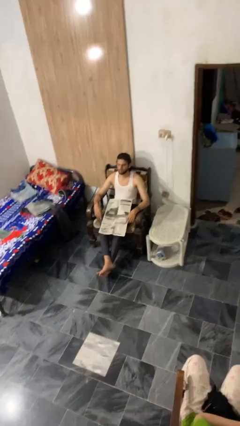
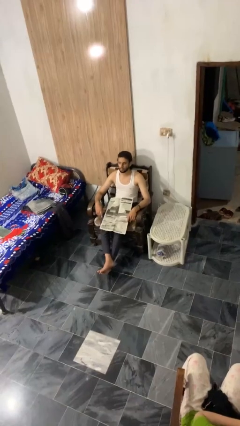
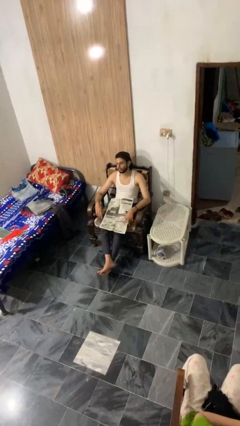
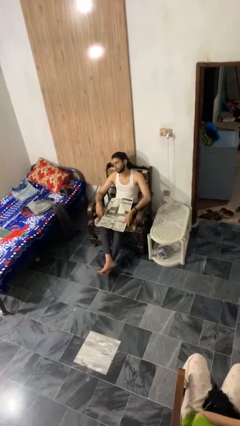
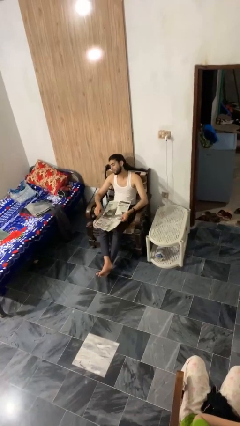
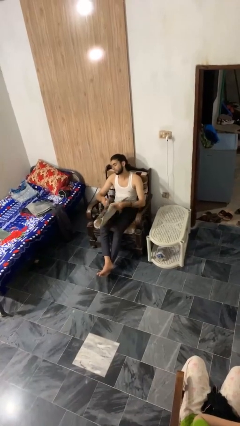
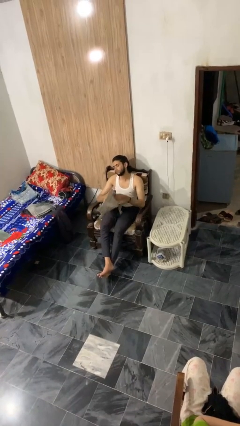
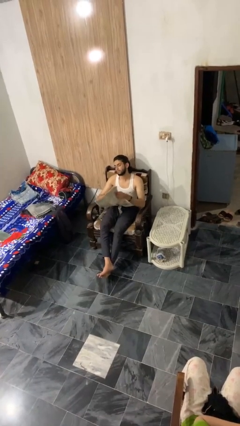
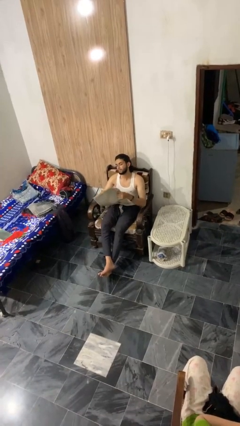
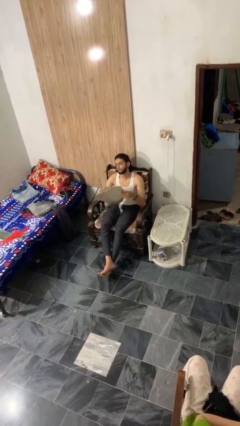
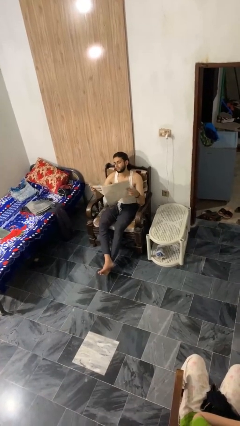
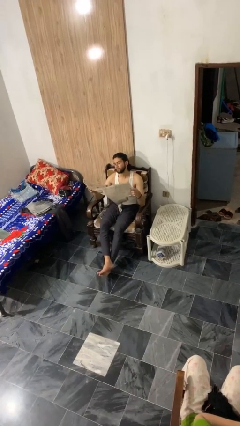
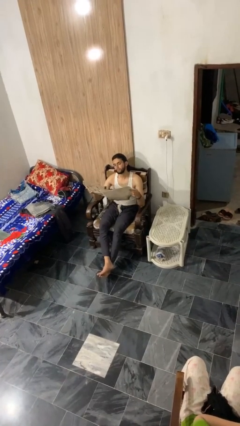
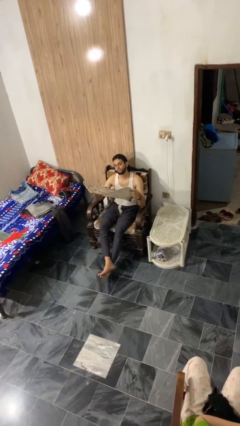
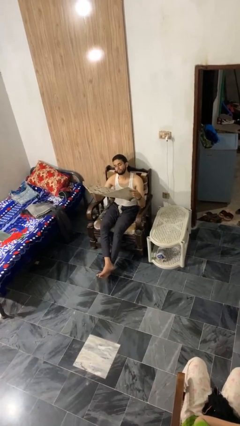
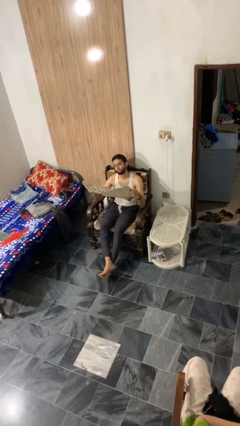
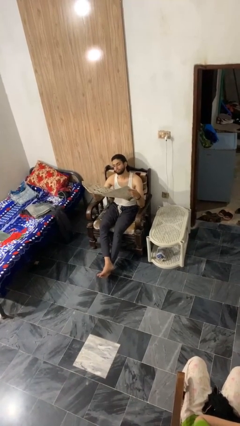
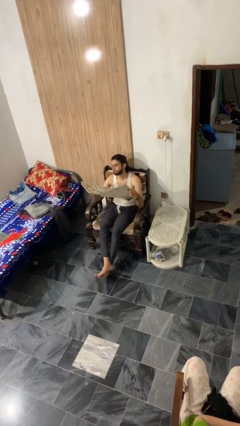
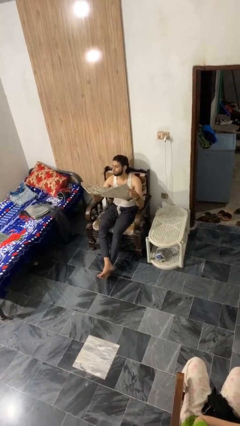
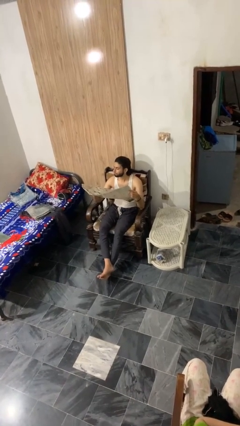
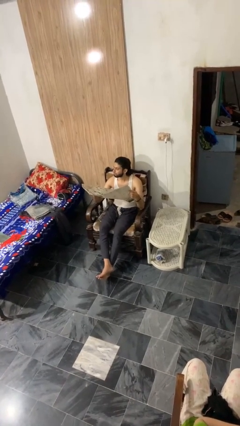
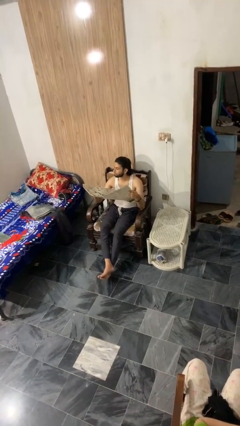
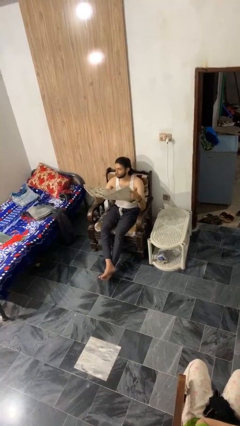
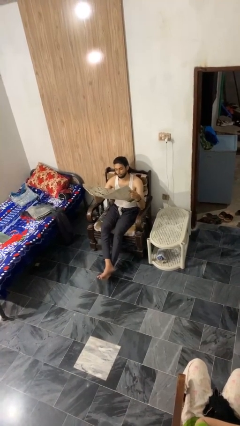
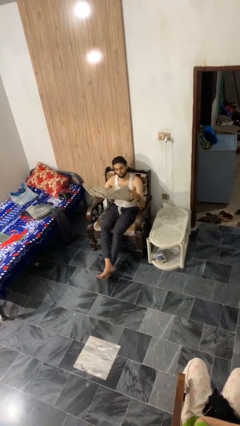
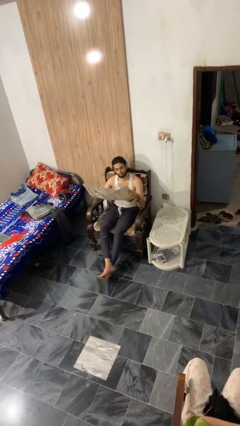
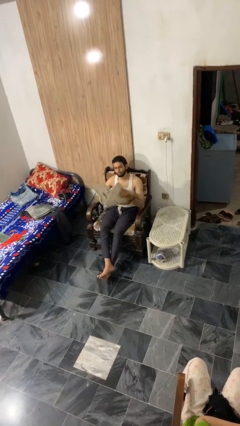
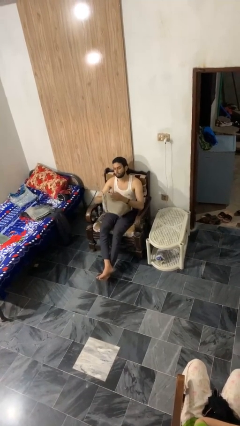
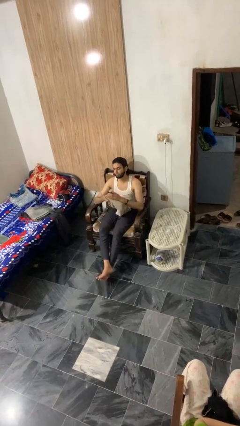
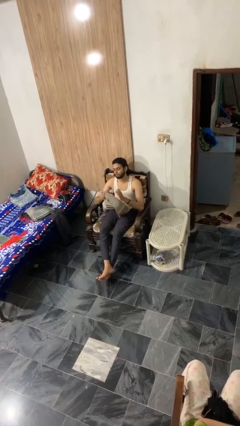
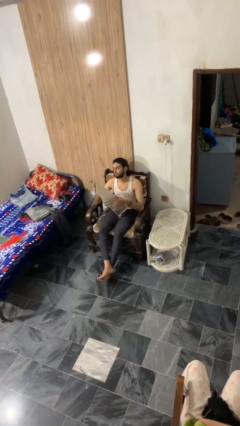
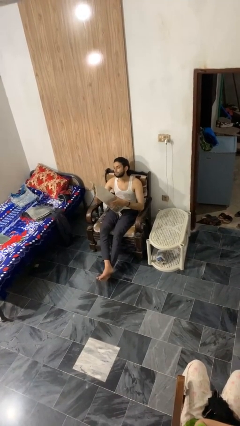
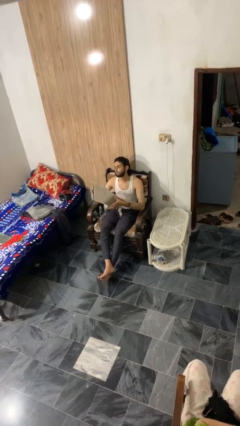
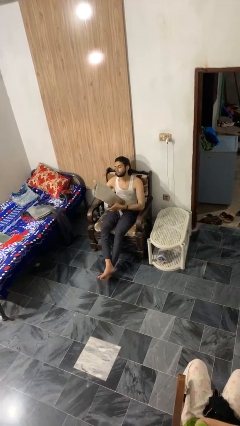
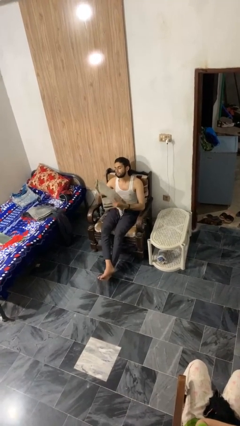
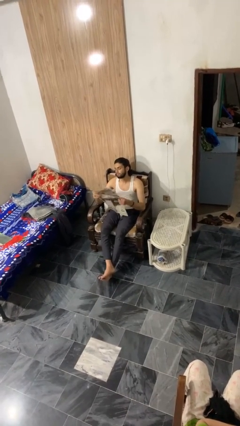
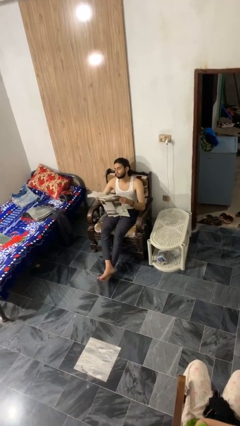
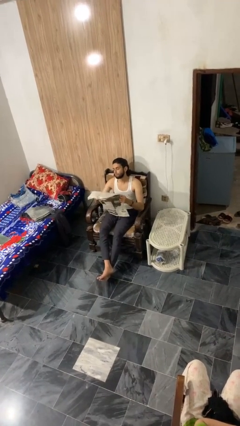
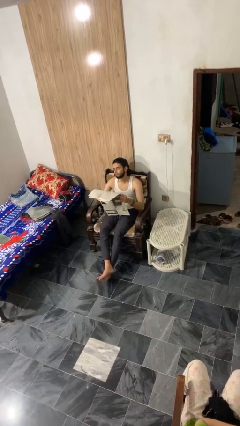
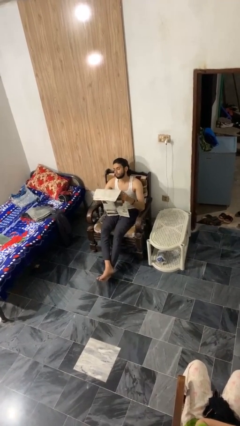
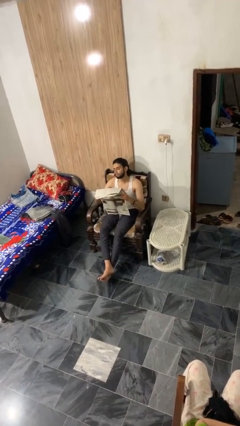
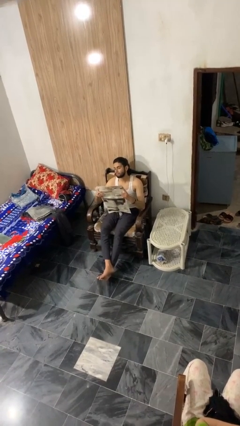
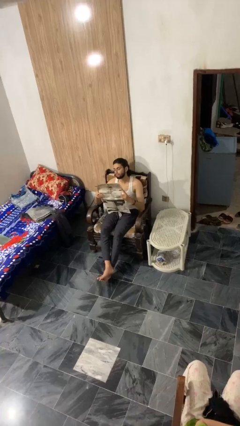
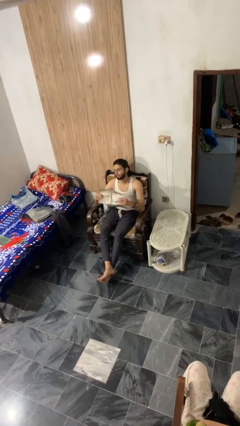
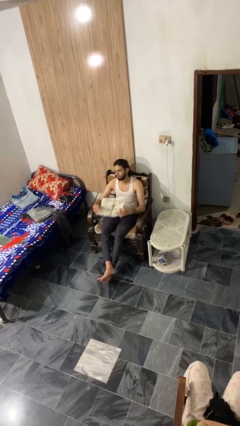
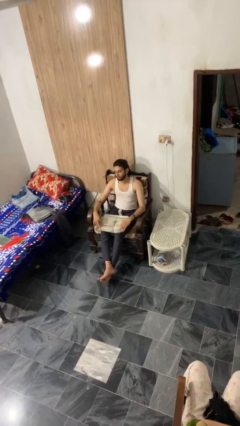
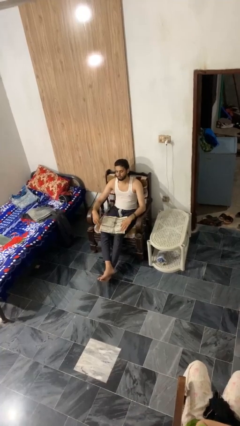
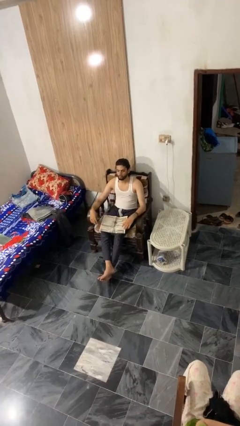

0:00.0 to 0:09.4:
person reads newspaper

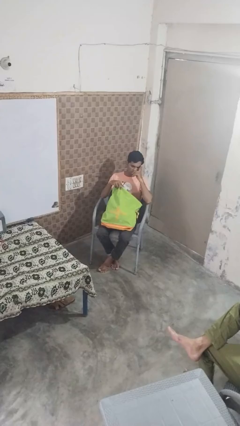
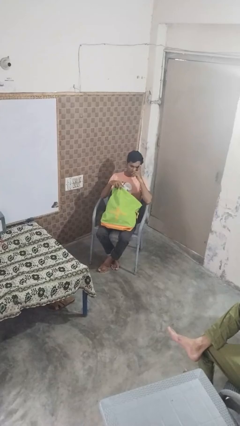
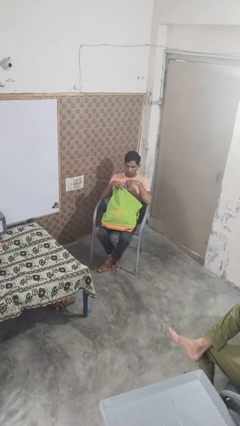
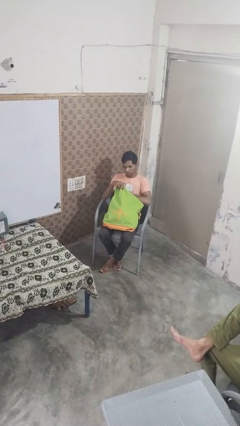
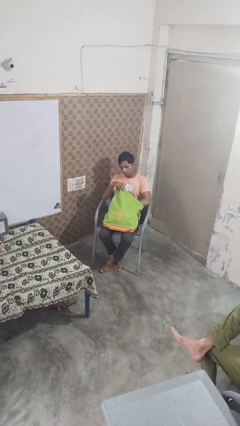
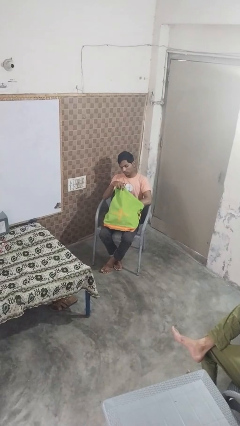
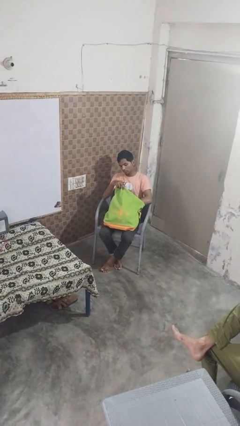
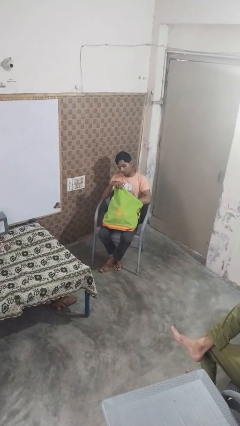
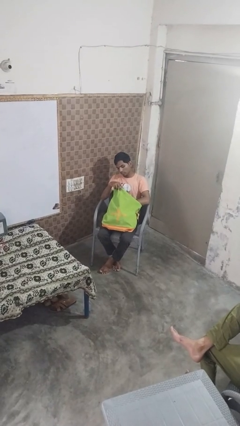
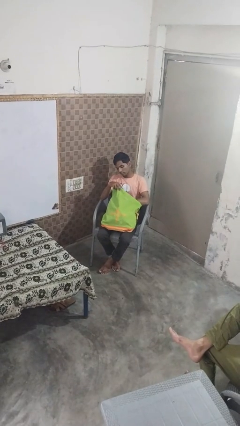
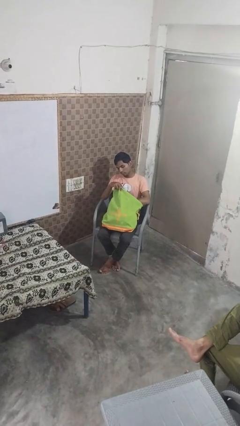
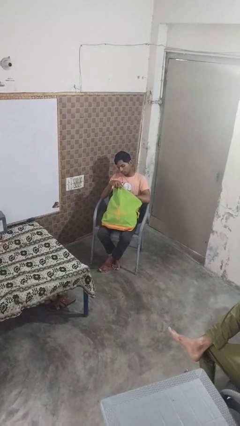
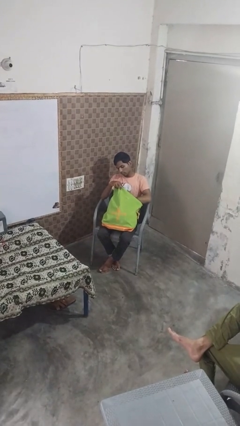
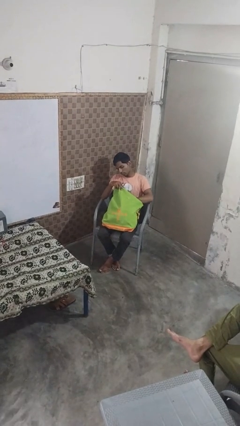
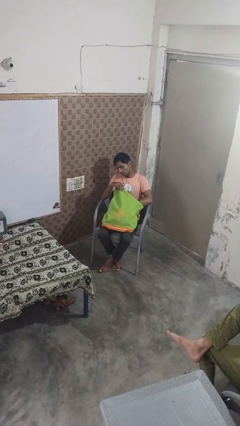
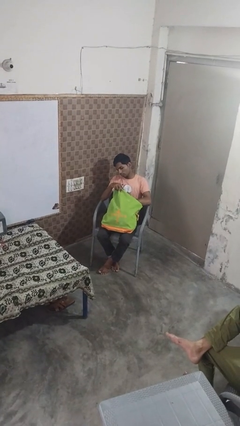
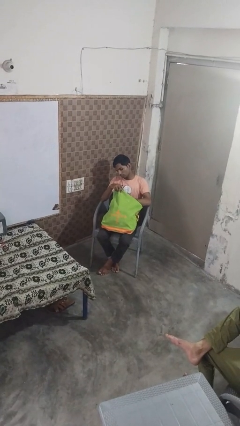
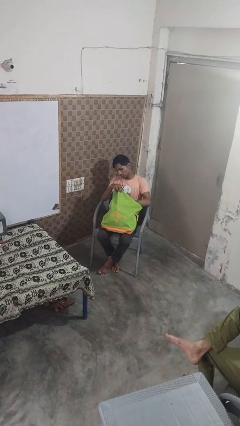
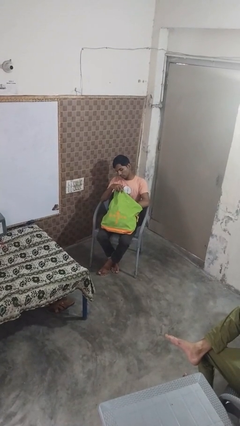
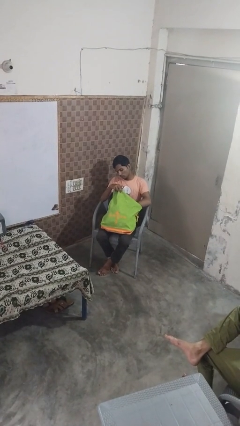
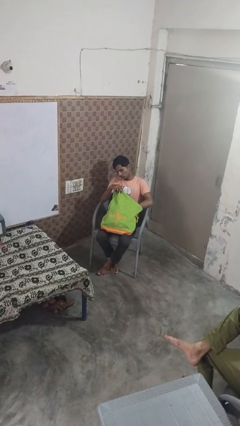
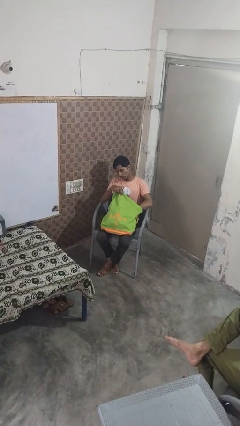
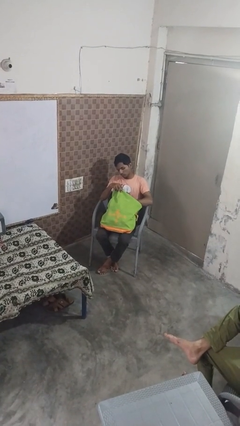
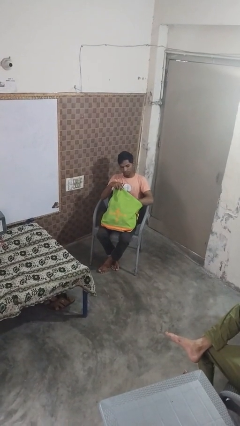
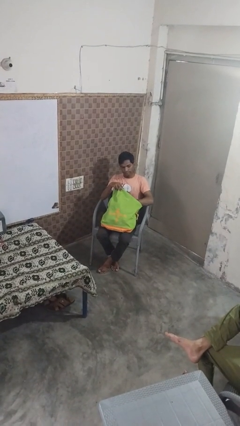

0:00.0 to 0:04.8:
person searches in bag

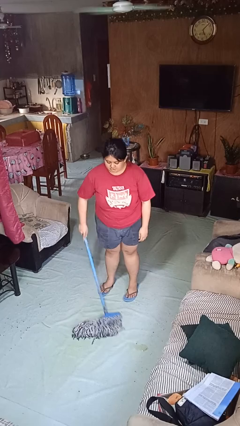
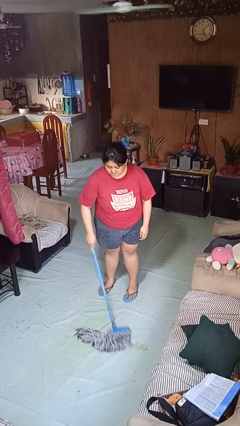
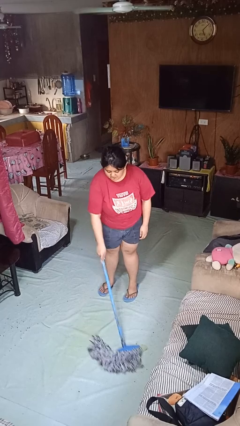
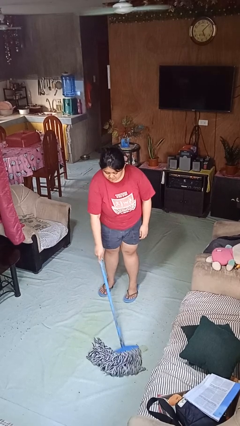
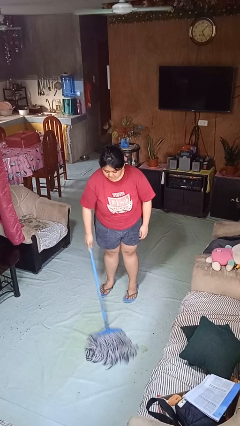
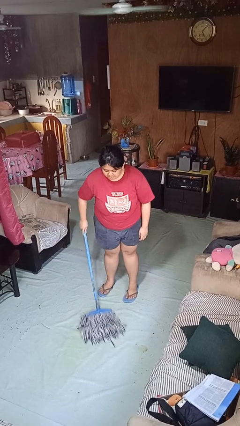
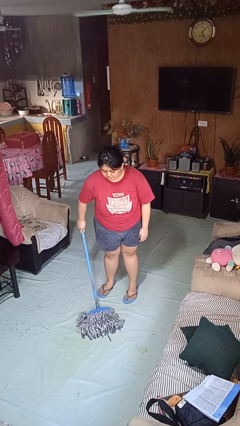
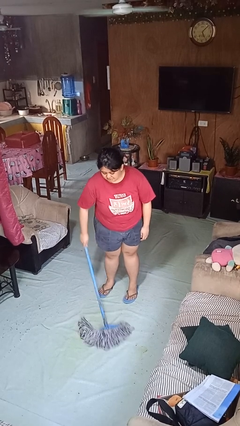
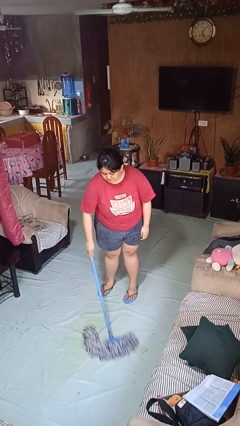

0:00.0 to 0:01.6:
person mops

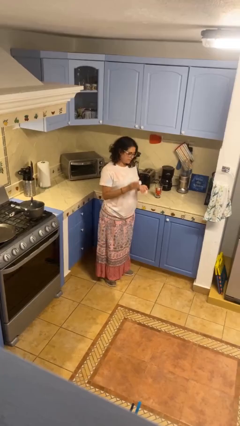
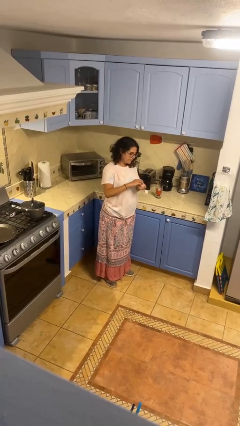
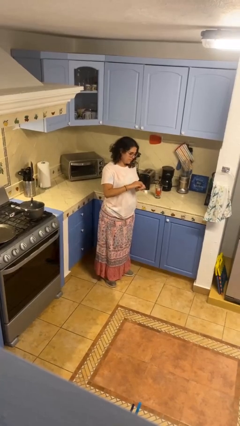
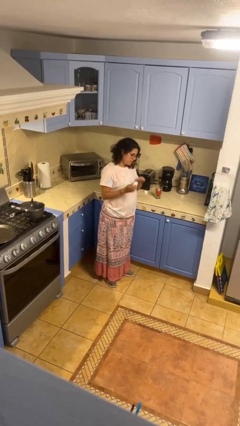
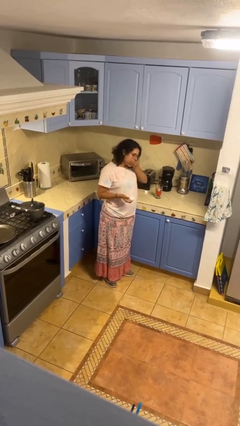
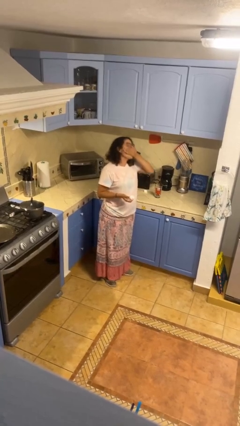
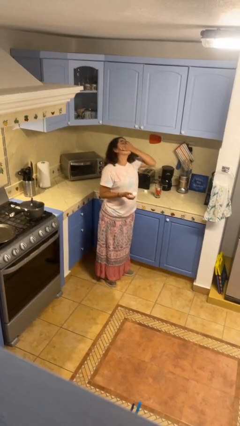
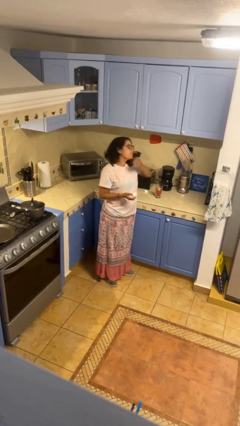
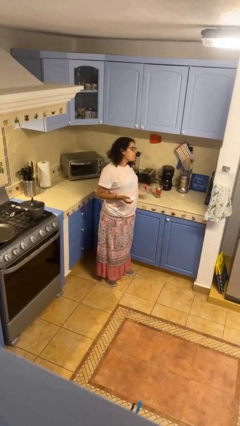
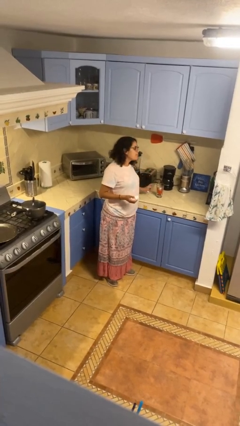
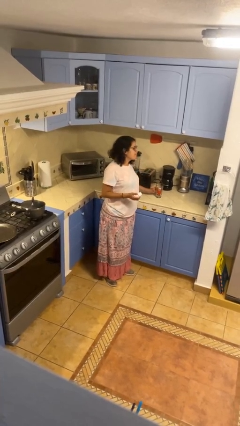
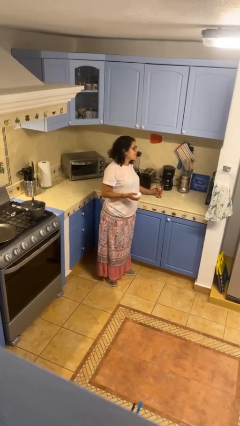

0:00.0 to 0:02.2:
person takes medicine pills
